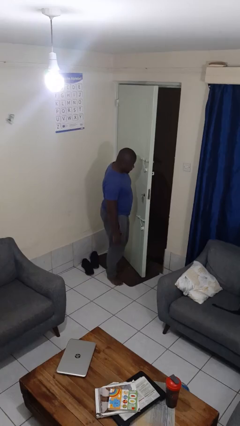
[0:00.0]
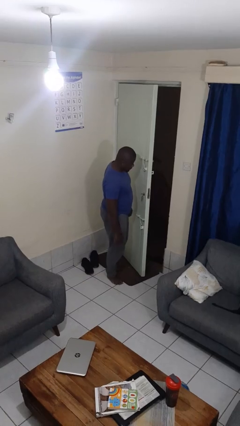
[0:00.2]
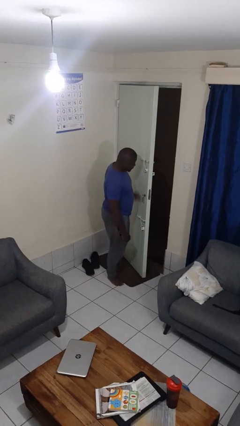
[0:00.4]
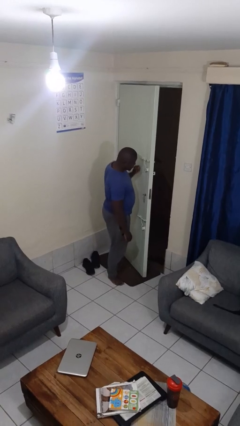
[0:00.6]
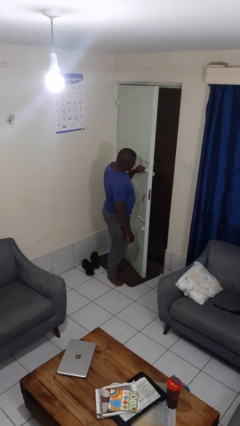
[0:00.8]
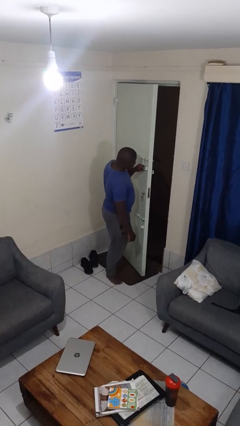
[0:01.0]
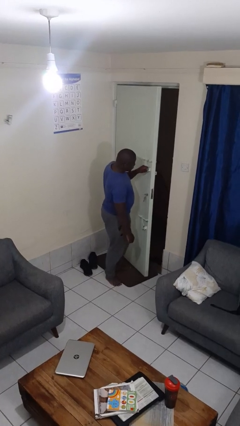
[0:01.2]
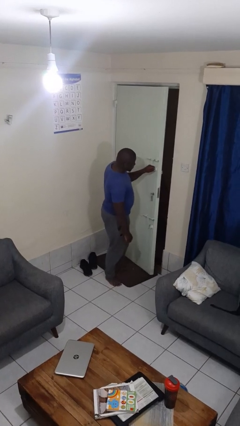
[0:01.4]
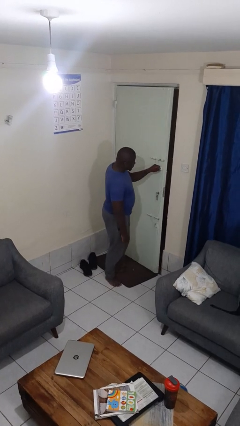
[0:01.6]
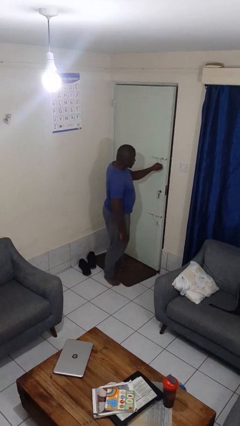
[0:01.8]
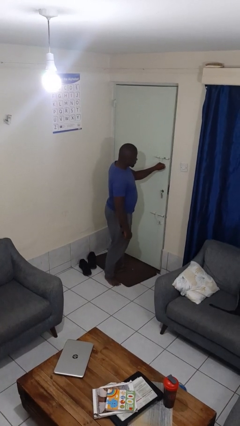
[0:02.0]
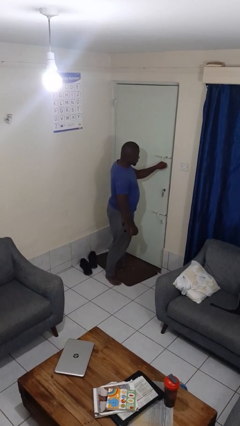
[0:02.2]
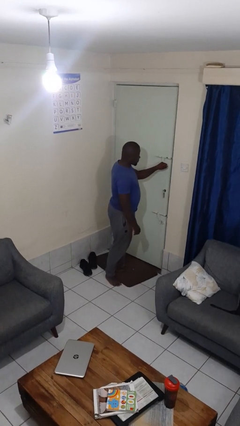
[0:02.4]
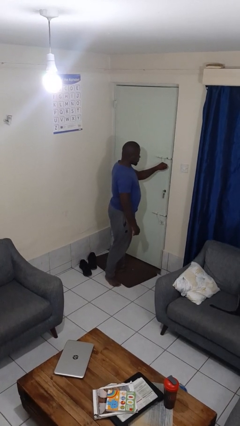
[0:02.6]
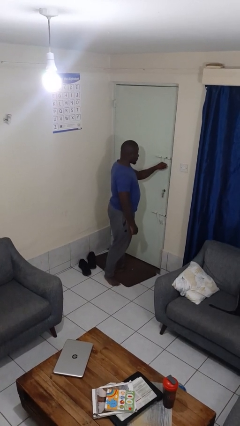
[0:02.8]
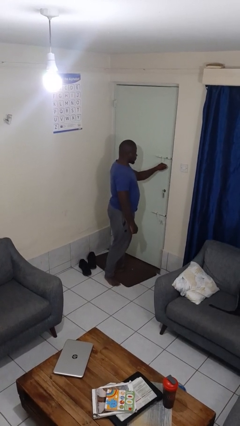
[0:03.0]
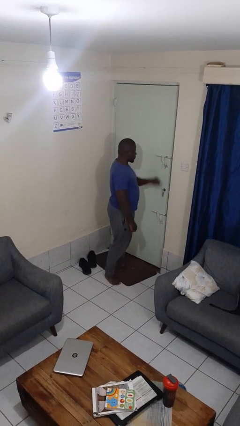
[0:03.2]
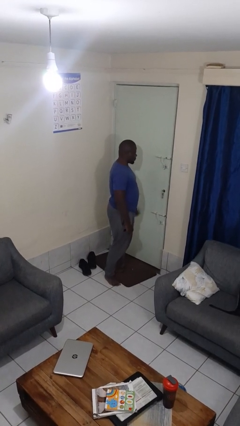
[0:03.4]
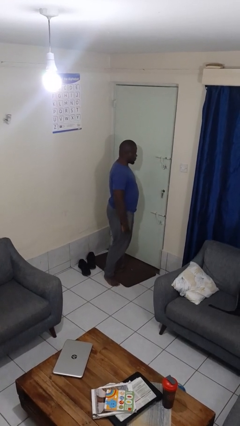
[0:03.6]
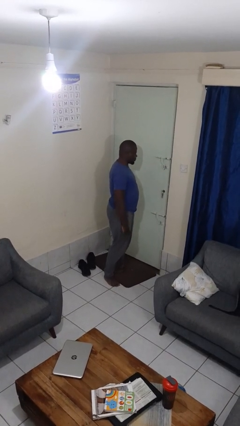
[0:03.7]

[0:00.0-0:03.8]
person closes facility door

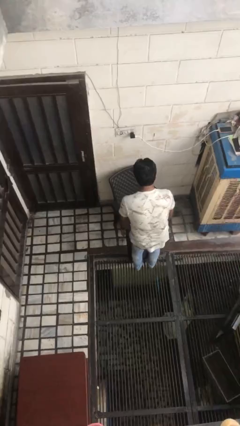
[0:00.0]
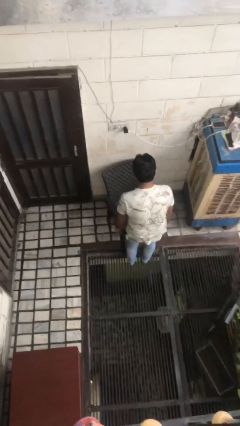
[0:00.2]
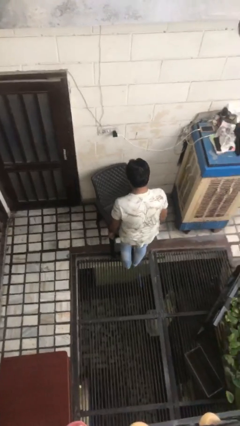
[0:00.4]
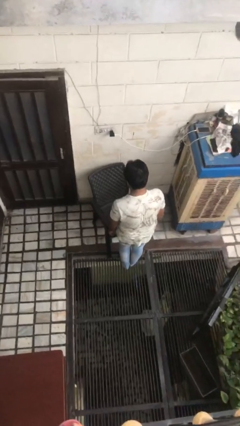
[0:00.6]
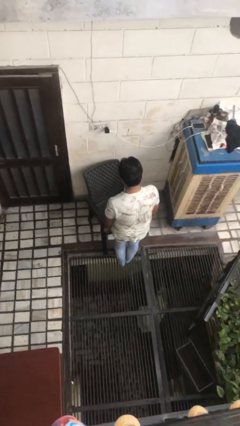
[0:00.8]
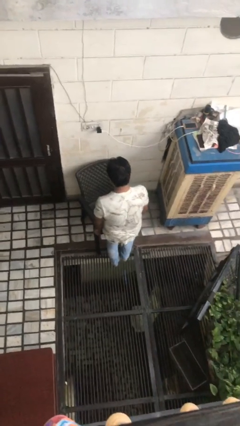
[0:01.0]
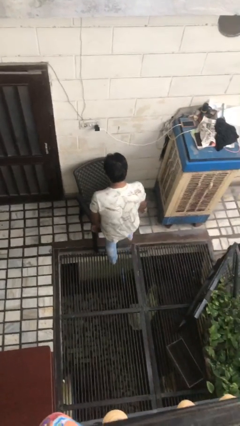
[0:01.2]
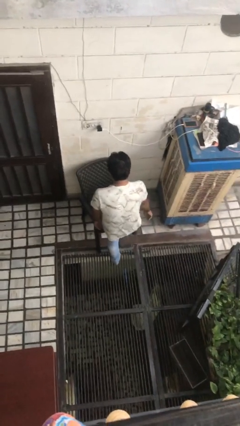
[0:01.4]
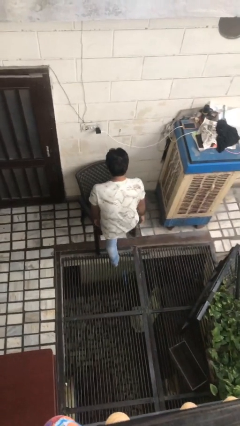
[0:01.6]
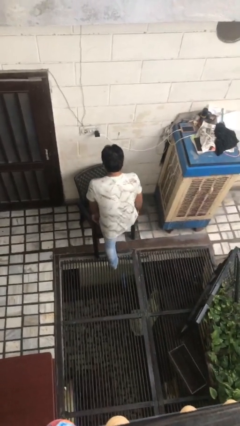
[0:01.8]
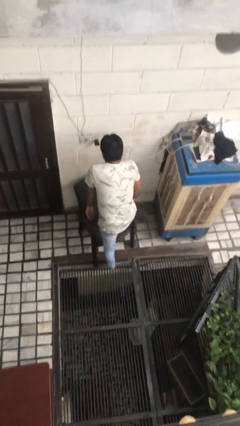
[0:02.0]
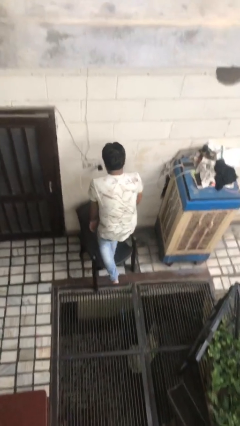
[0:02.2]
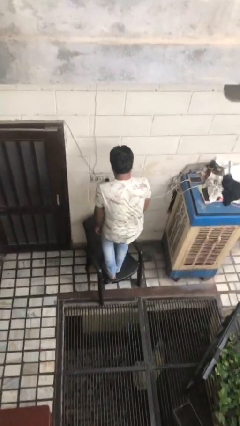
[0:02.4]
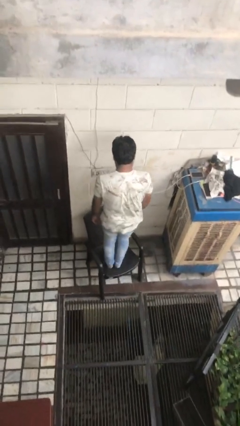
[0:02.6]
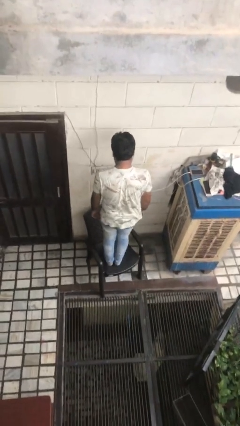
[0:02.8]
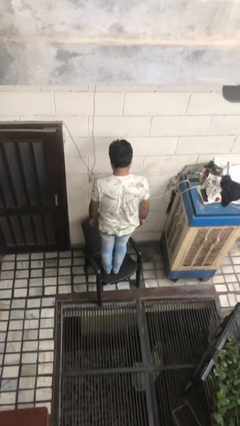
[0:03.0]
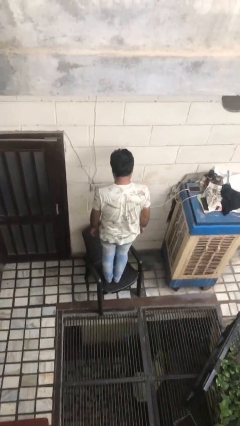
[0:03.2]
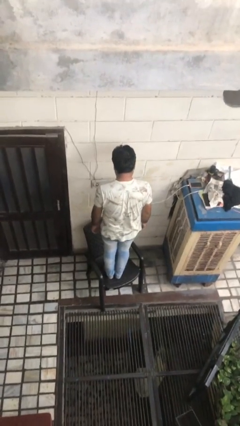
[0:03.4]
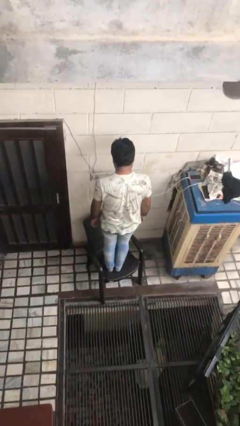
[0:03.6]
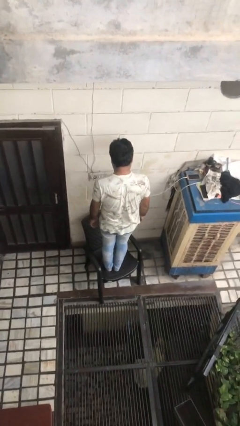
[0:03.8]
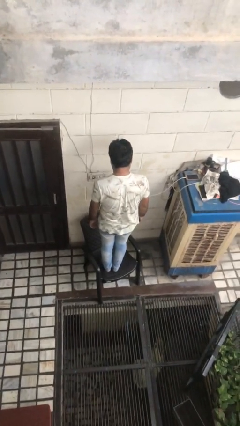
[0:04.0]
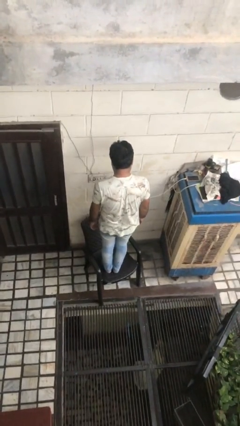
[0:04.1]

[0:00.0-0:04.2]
person climbs on chair

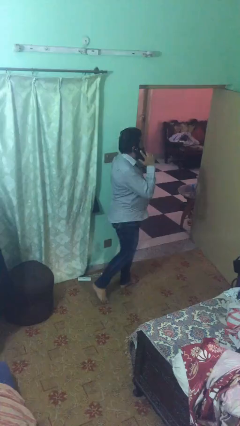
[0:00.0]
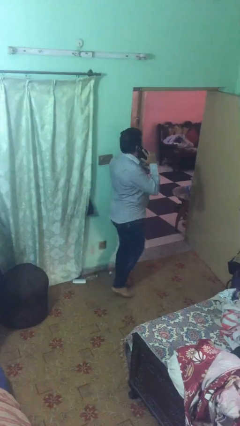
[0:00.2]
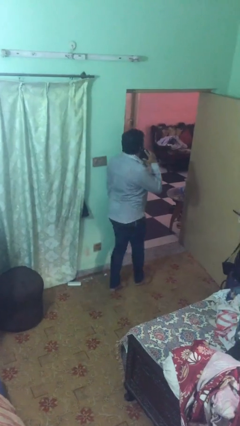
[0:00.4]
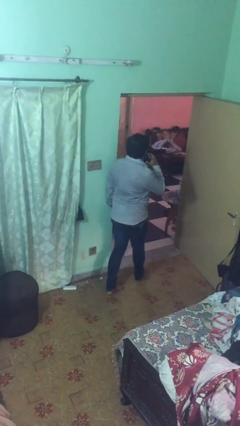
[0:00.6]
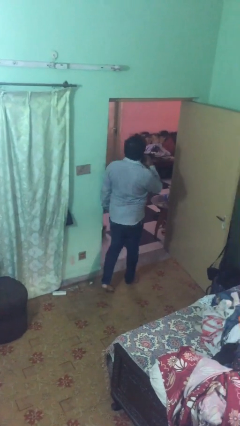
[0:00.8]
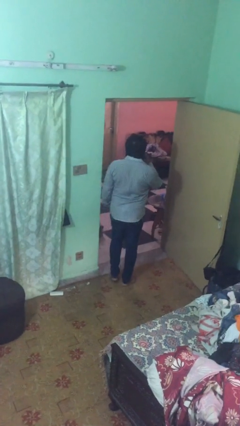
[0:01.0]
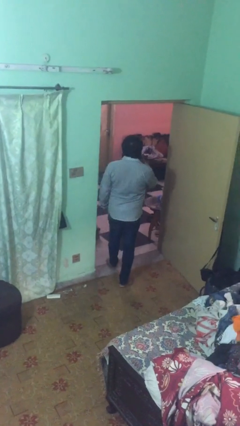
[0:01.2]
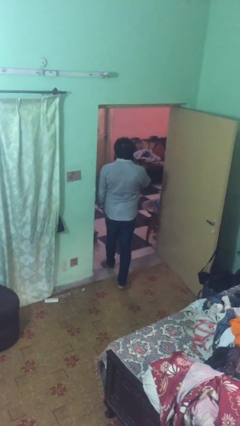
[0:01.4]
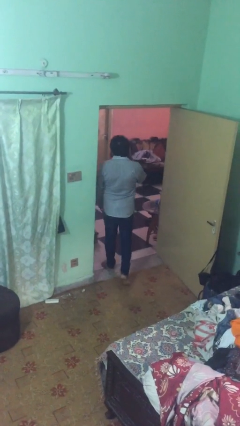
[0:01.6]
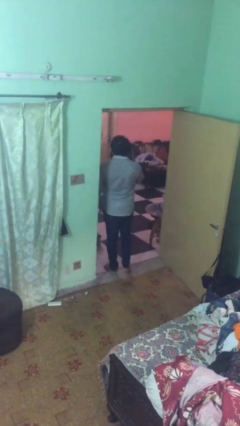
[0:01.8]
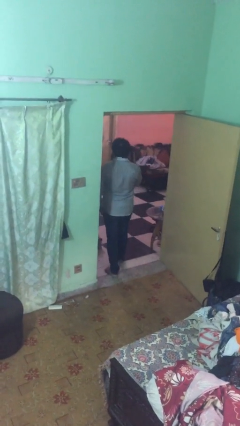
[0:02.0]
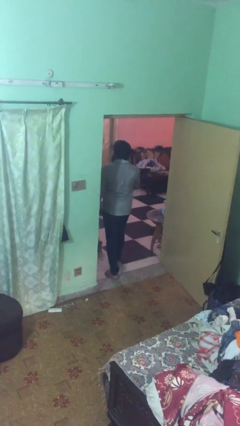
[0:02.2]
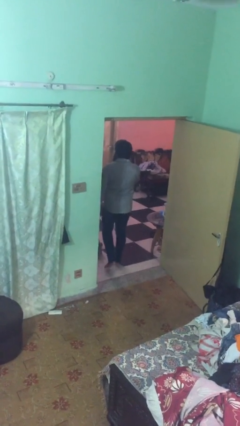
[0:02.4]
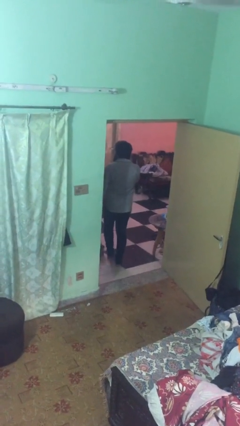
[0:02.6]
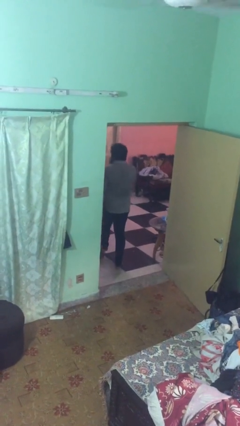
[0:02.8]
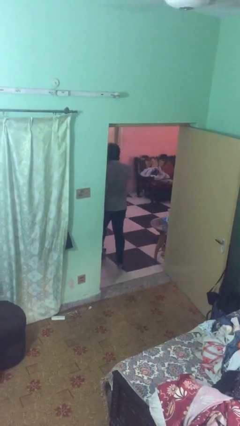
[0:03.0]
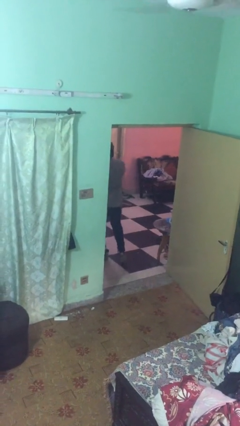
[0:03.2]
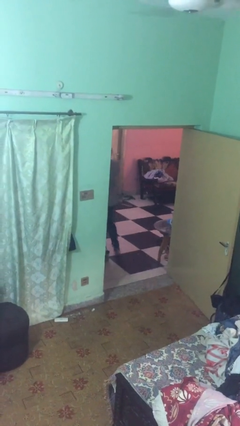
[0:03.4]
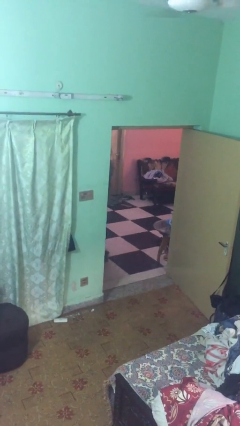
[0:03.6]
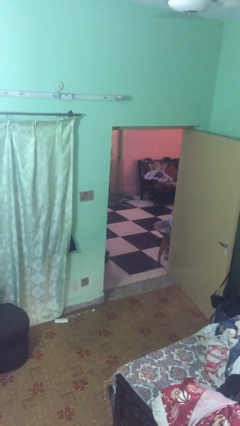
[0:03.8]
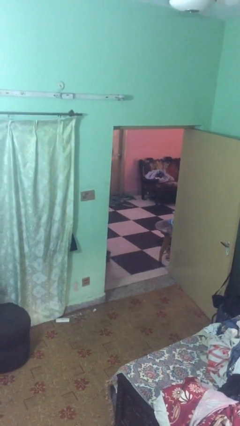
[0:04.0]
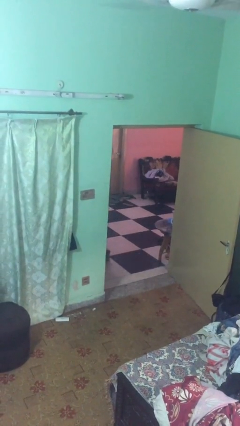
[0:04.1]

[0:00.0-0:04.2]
person exits scene through structure

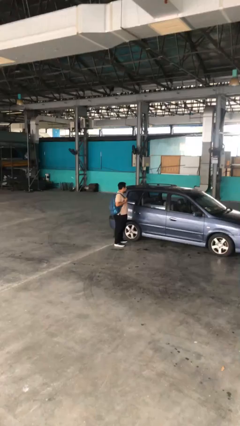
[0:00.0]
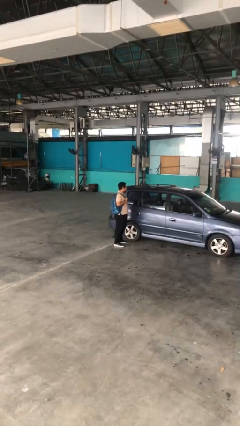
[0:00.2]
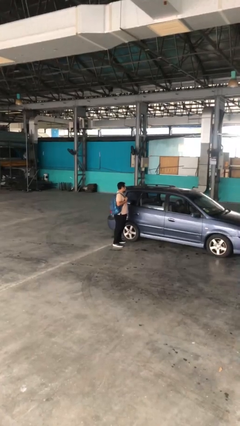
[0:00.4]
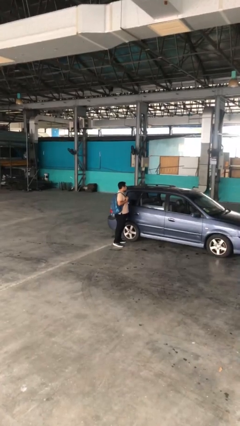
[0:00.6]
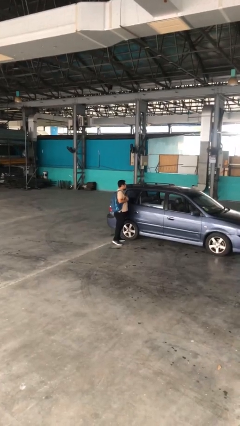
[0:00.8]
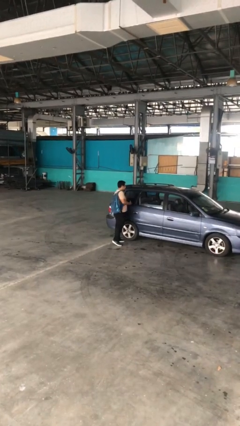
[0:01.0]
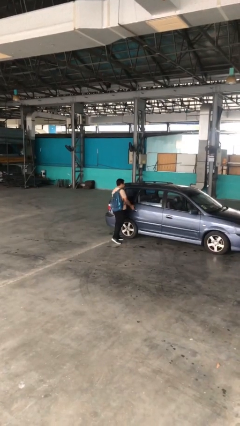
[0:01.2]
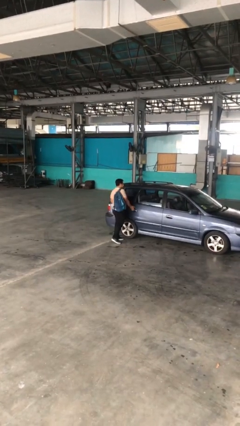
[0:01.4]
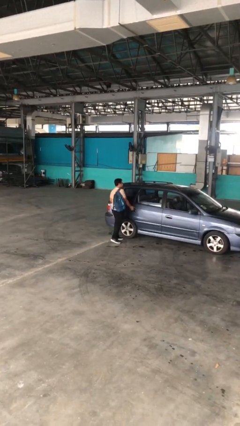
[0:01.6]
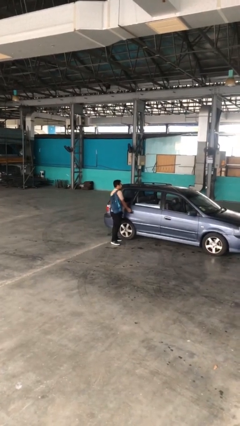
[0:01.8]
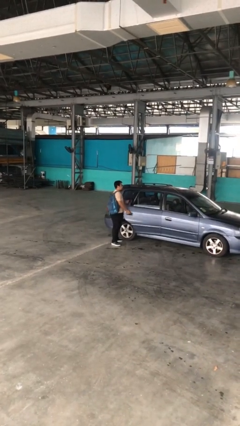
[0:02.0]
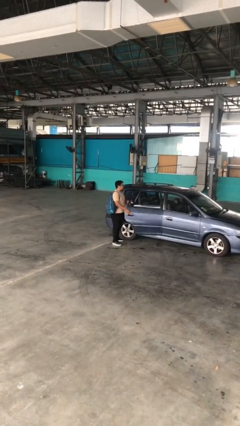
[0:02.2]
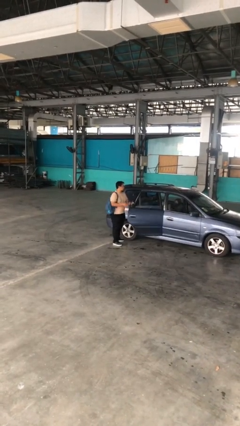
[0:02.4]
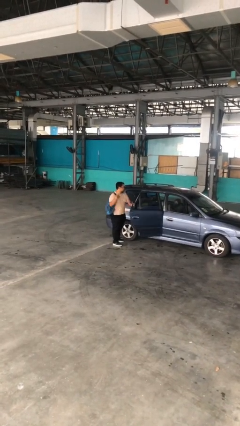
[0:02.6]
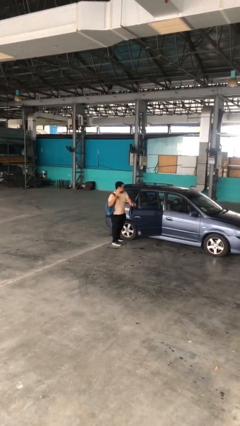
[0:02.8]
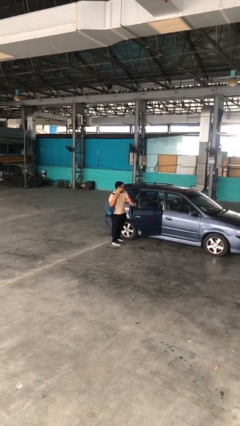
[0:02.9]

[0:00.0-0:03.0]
person opens car door

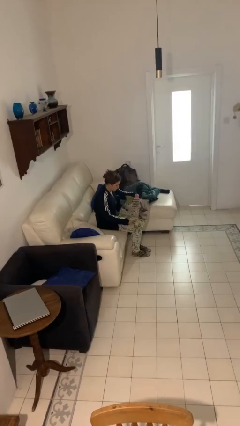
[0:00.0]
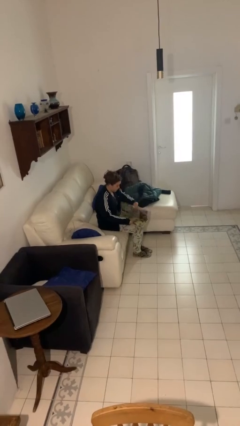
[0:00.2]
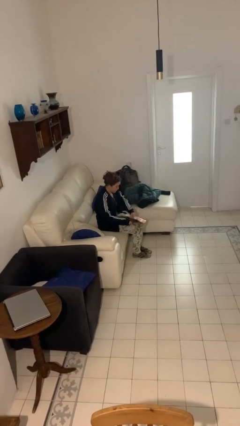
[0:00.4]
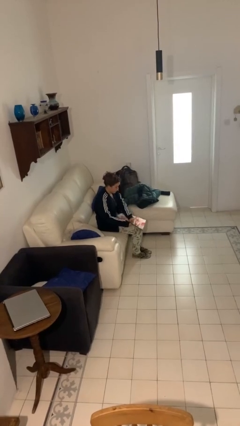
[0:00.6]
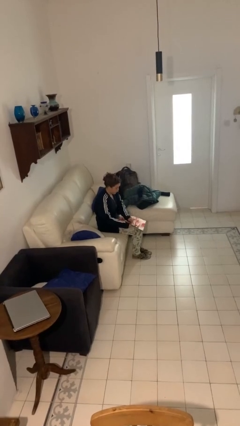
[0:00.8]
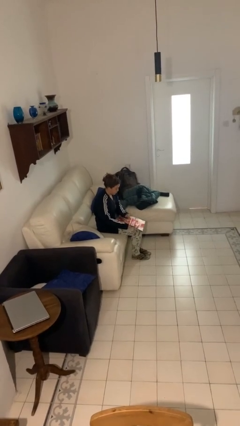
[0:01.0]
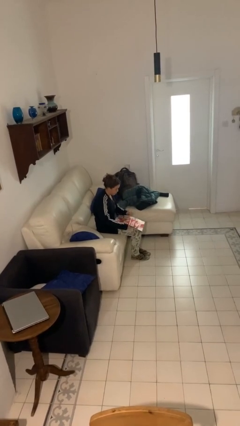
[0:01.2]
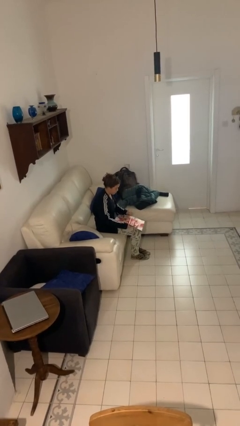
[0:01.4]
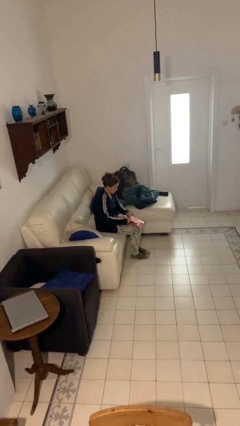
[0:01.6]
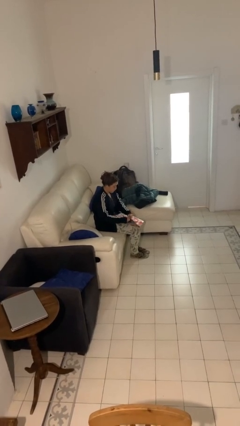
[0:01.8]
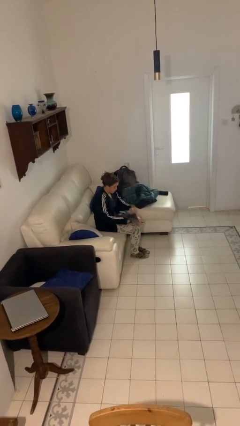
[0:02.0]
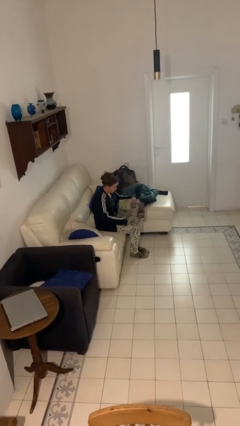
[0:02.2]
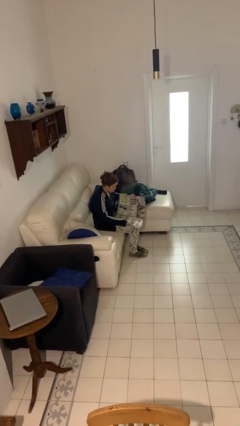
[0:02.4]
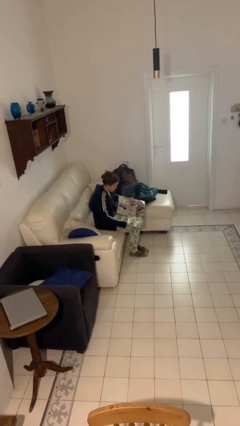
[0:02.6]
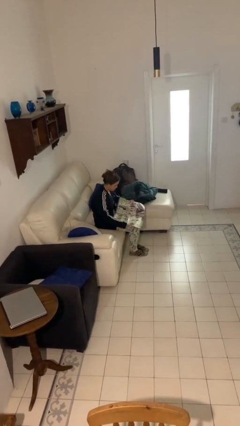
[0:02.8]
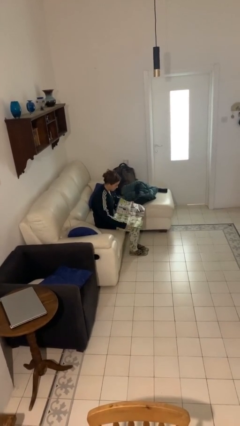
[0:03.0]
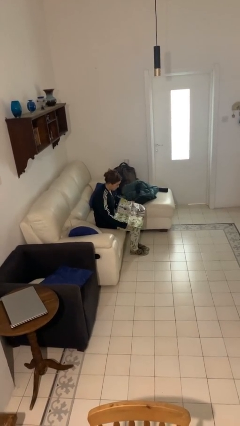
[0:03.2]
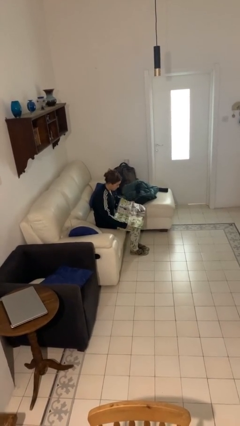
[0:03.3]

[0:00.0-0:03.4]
person reads newspaper
